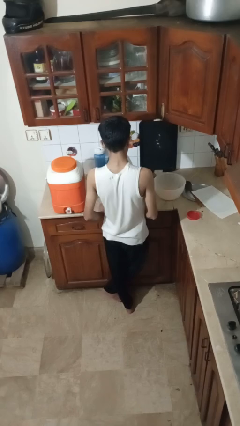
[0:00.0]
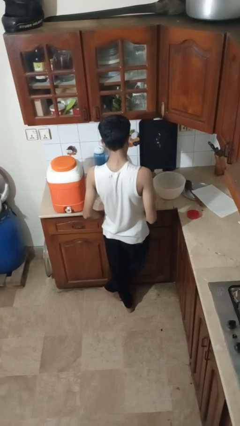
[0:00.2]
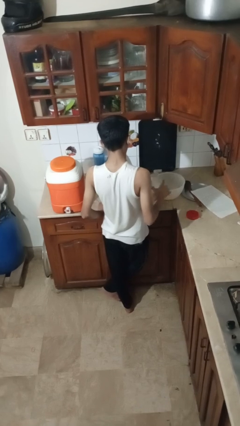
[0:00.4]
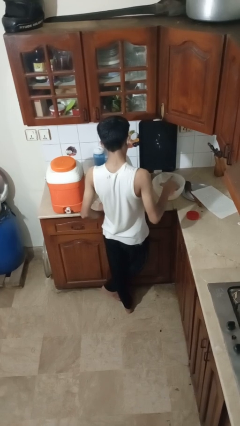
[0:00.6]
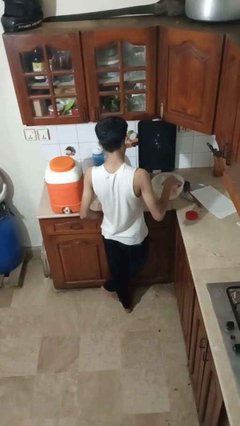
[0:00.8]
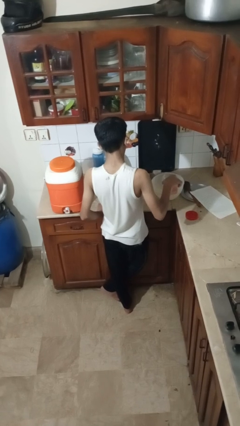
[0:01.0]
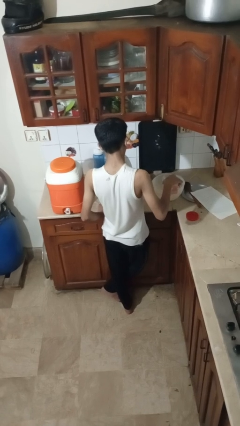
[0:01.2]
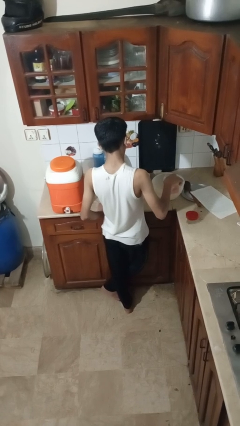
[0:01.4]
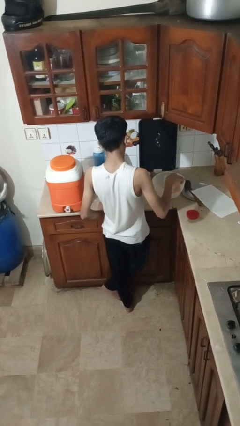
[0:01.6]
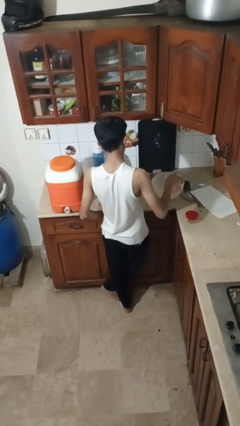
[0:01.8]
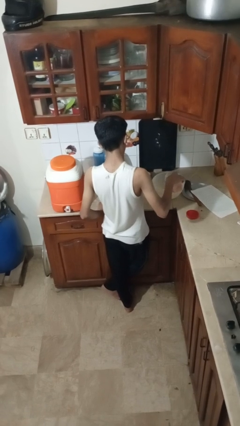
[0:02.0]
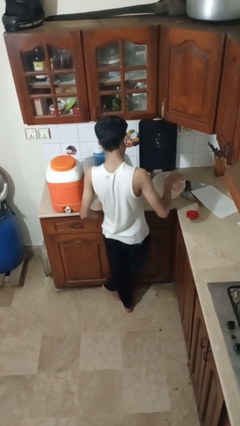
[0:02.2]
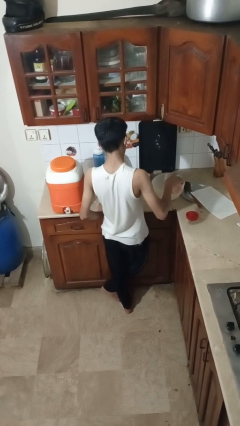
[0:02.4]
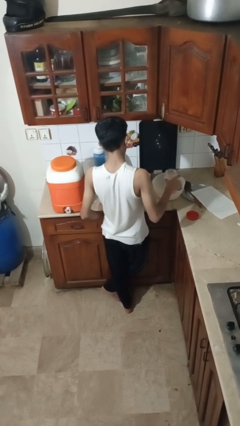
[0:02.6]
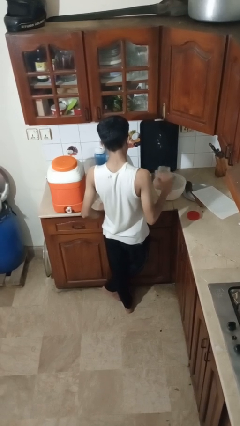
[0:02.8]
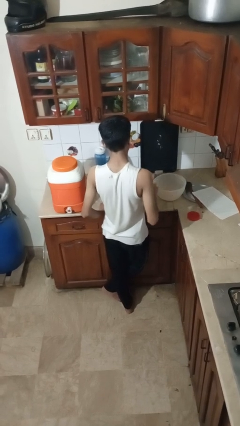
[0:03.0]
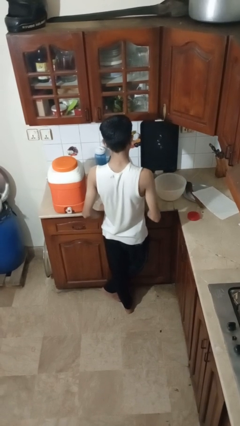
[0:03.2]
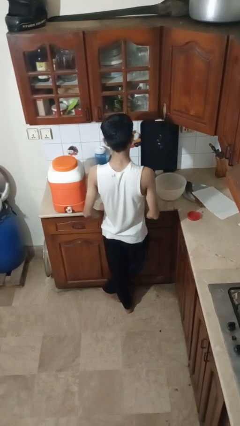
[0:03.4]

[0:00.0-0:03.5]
person pours into bowl

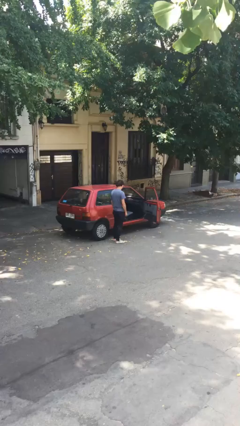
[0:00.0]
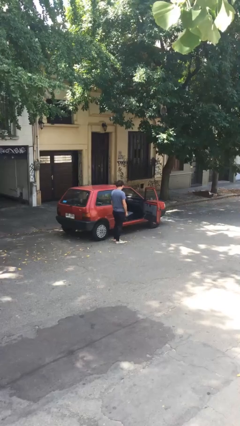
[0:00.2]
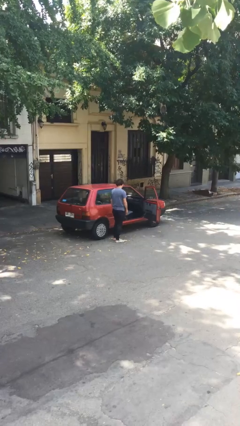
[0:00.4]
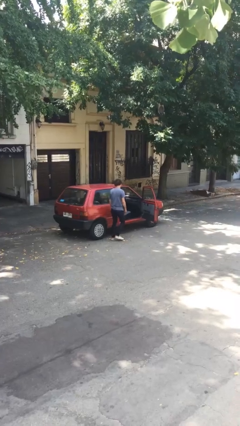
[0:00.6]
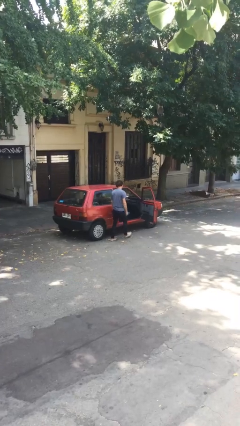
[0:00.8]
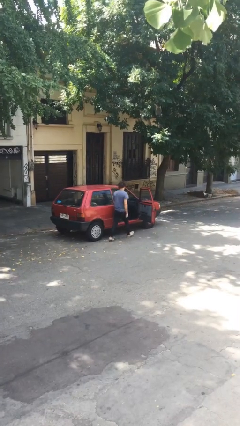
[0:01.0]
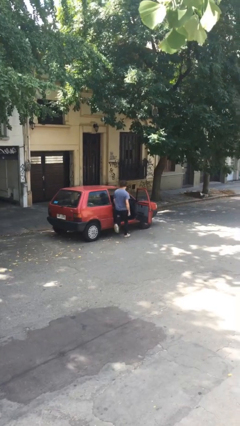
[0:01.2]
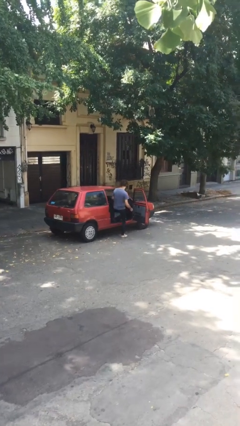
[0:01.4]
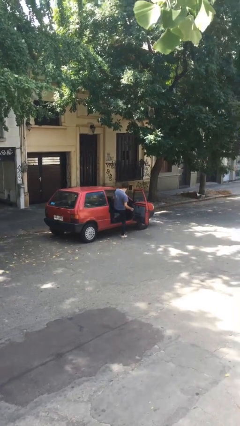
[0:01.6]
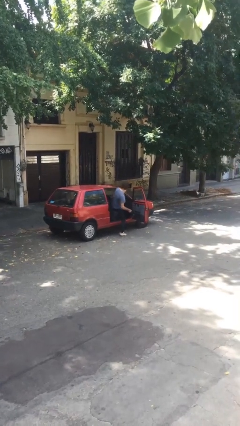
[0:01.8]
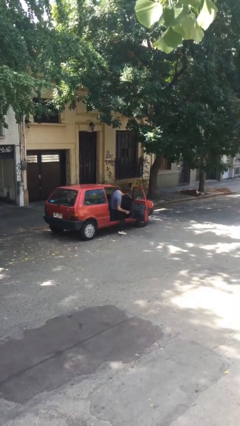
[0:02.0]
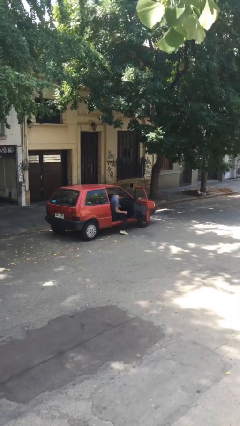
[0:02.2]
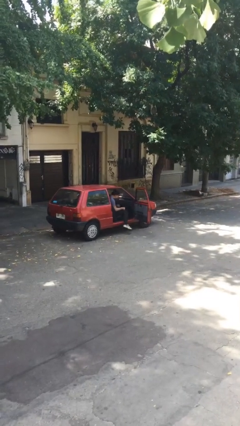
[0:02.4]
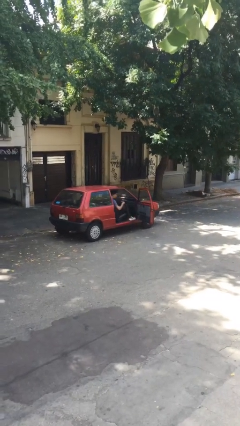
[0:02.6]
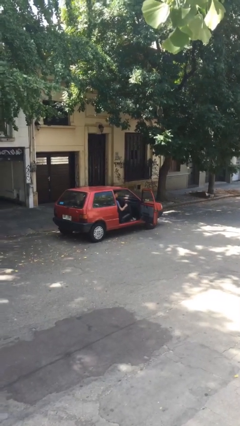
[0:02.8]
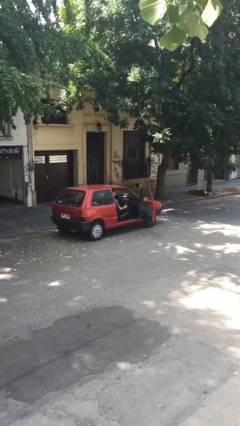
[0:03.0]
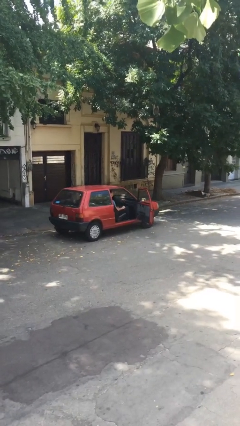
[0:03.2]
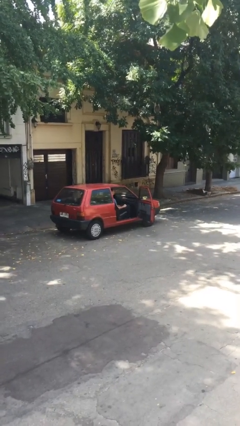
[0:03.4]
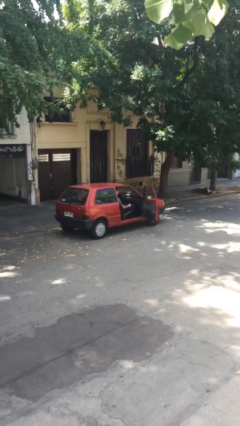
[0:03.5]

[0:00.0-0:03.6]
person enters car

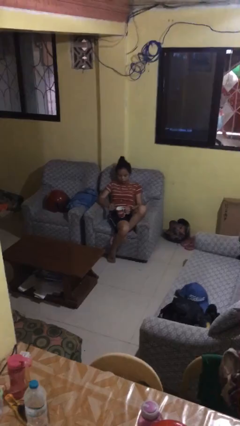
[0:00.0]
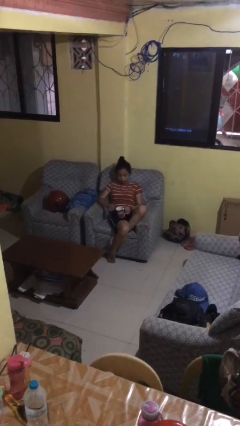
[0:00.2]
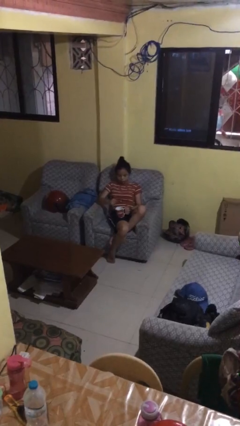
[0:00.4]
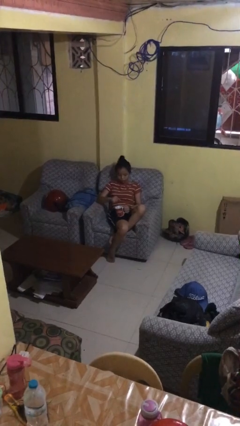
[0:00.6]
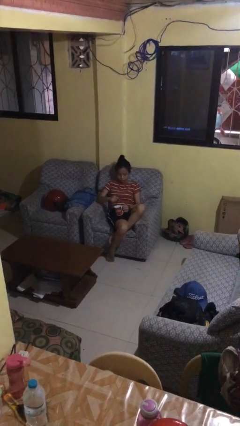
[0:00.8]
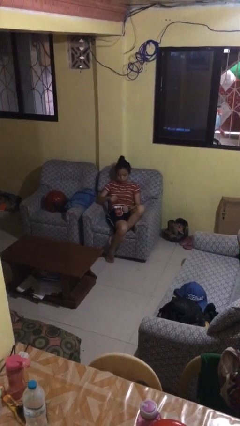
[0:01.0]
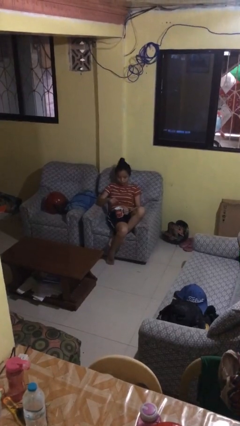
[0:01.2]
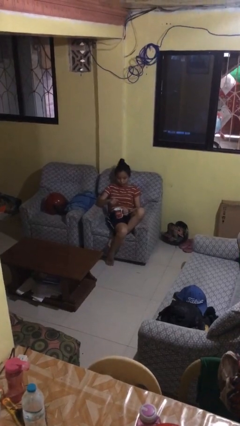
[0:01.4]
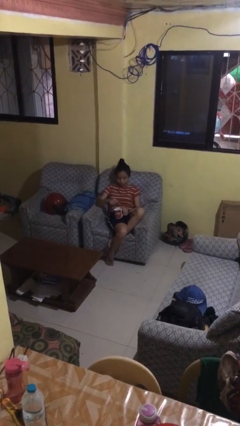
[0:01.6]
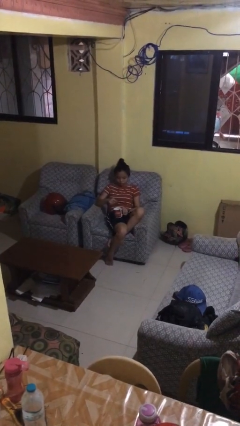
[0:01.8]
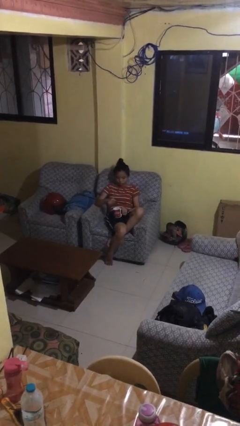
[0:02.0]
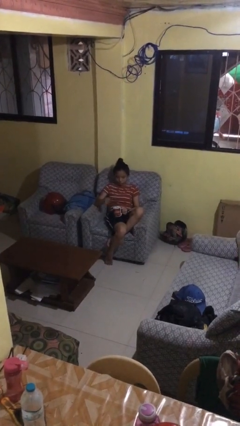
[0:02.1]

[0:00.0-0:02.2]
person stirs mug

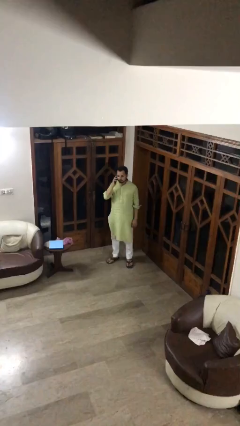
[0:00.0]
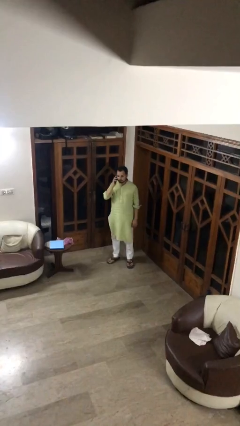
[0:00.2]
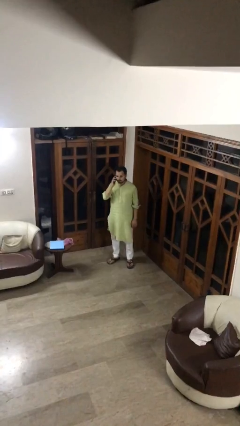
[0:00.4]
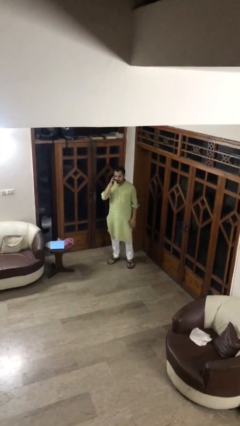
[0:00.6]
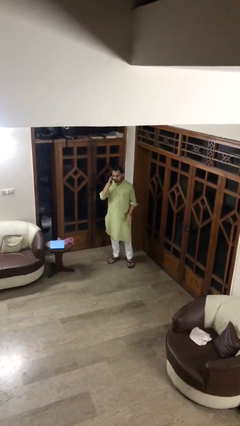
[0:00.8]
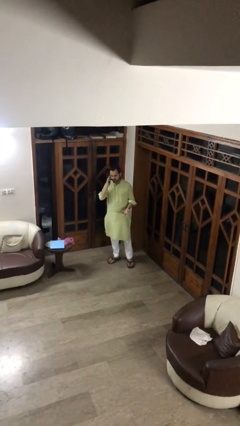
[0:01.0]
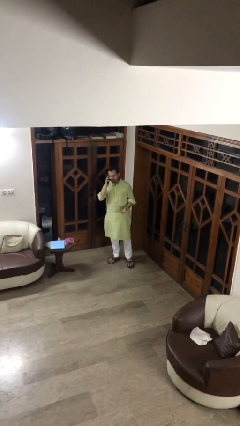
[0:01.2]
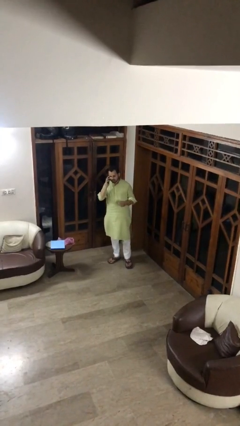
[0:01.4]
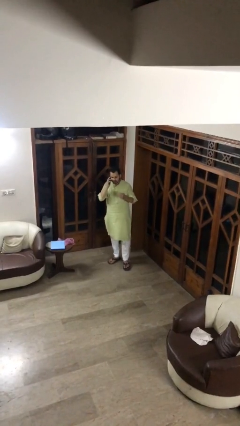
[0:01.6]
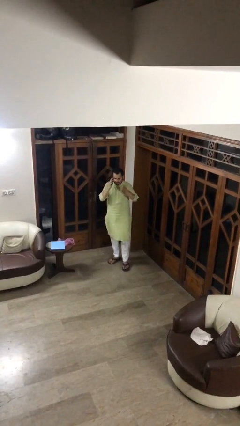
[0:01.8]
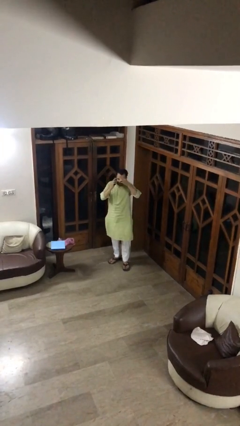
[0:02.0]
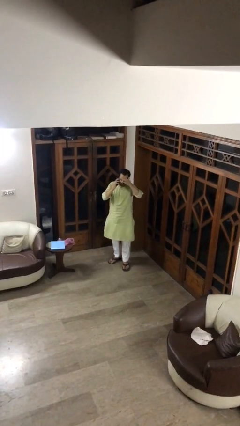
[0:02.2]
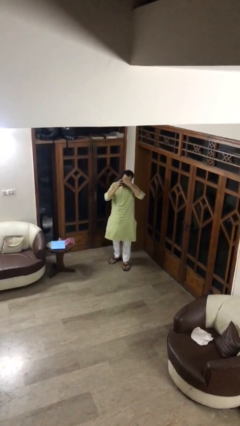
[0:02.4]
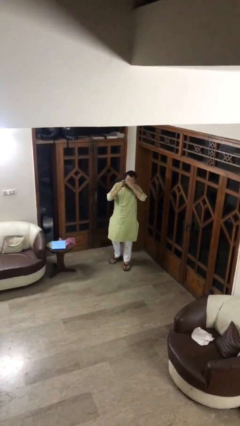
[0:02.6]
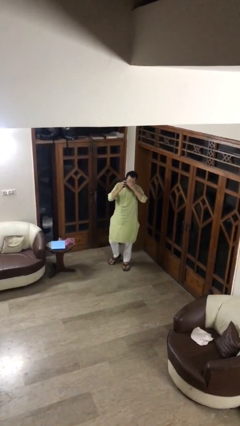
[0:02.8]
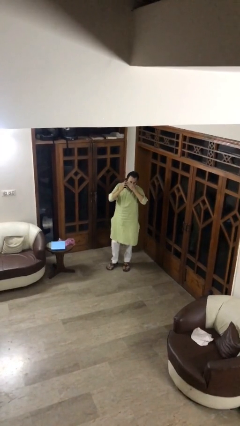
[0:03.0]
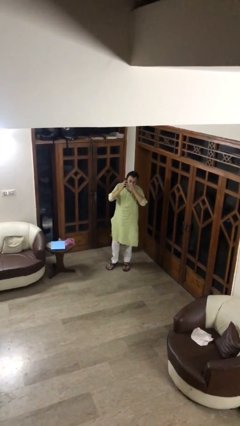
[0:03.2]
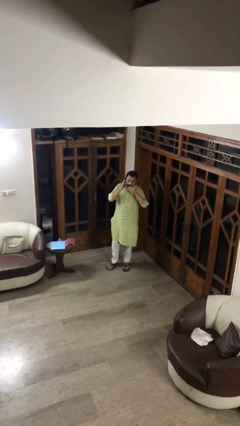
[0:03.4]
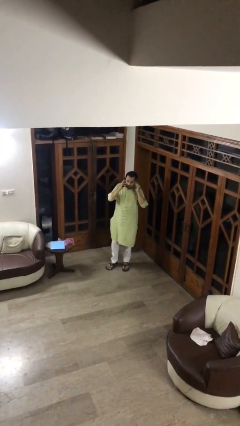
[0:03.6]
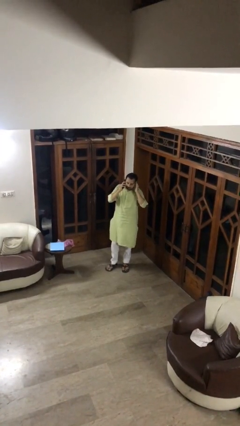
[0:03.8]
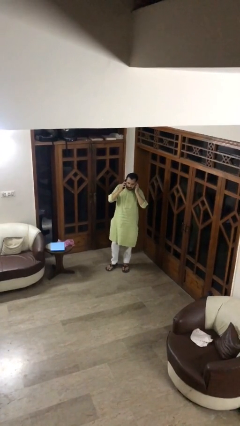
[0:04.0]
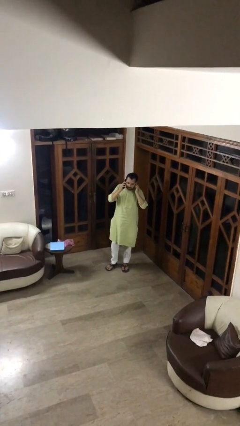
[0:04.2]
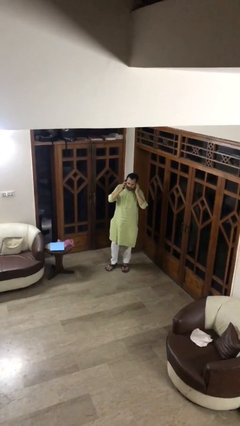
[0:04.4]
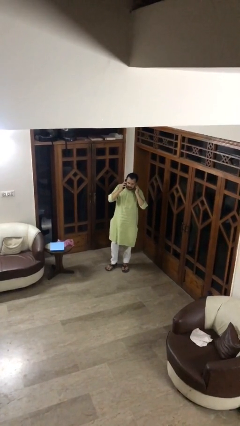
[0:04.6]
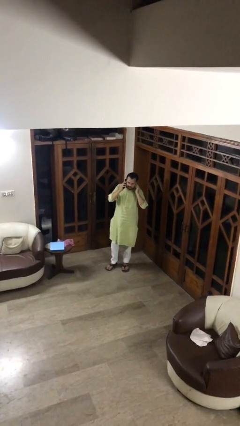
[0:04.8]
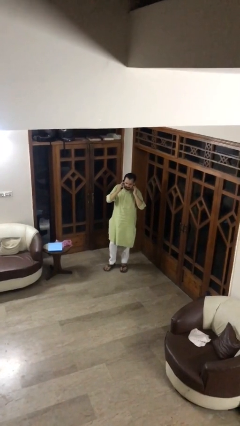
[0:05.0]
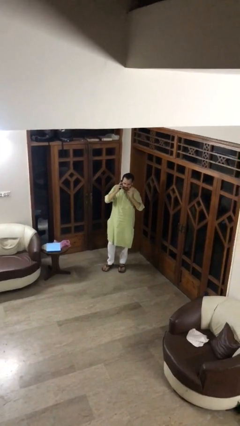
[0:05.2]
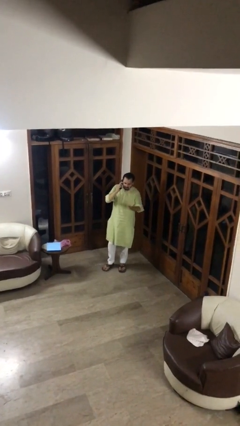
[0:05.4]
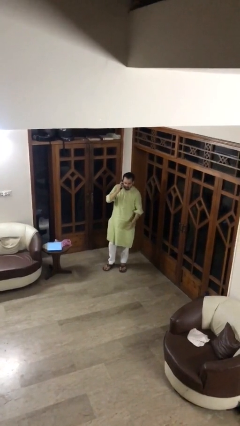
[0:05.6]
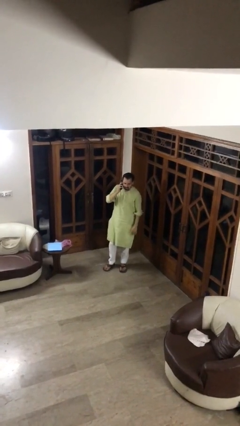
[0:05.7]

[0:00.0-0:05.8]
person talks on phone

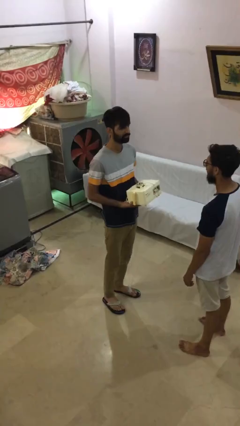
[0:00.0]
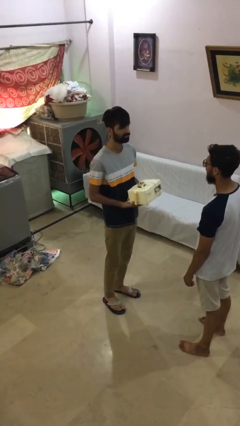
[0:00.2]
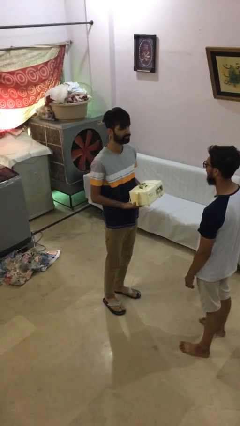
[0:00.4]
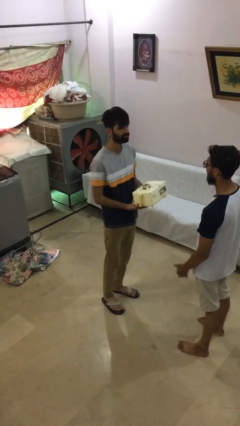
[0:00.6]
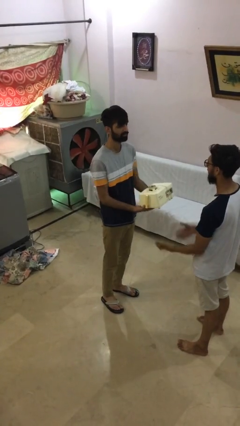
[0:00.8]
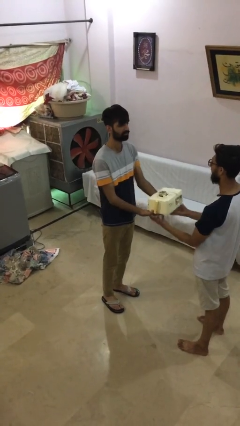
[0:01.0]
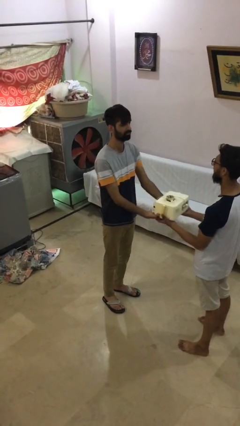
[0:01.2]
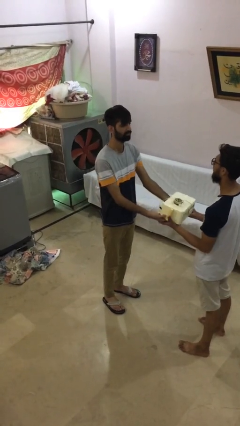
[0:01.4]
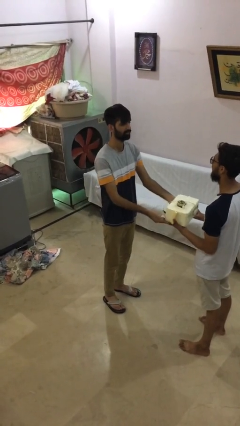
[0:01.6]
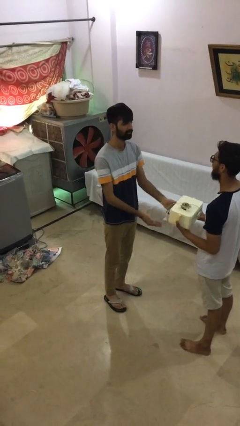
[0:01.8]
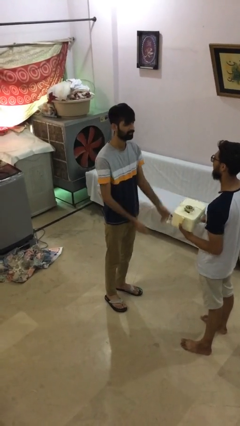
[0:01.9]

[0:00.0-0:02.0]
person transfers object to person

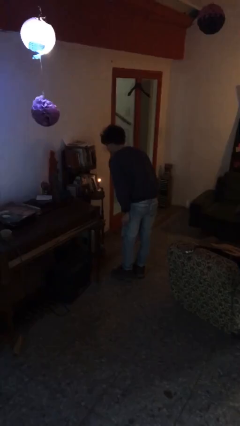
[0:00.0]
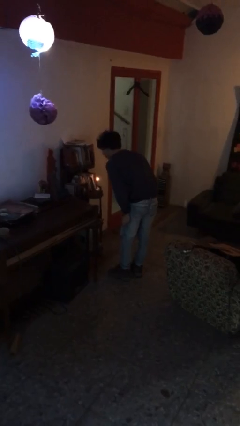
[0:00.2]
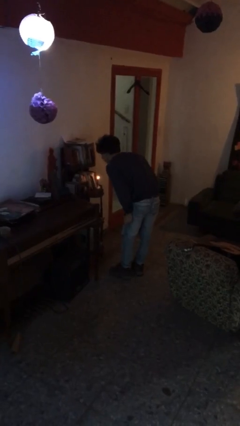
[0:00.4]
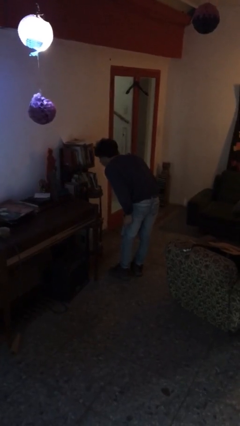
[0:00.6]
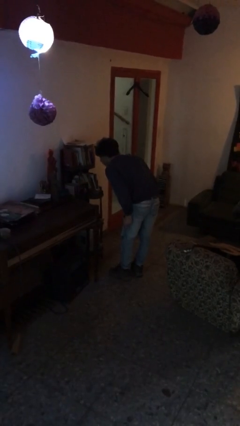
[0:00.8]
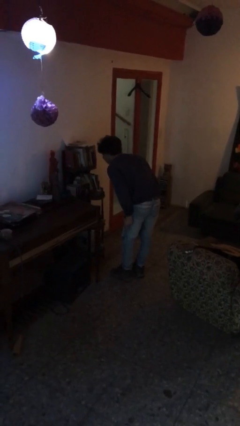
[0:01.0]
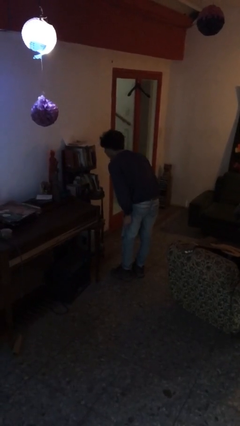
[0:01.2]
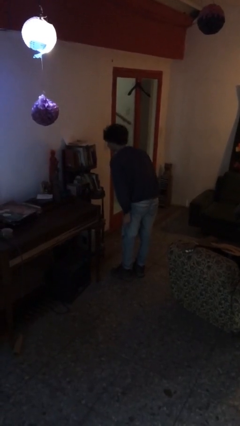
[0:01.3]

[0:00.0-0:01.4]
person extinguishes candle
